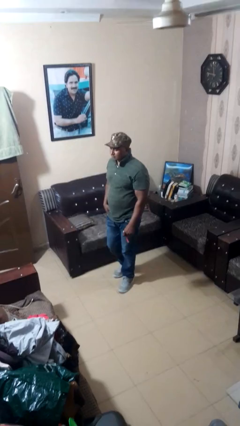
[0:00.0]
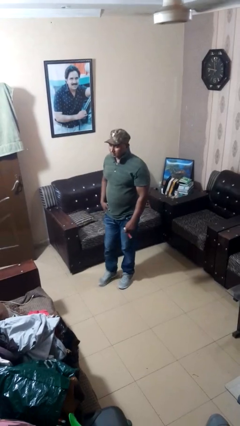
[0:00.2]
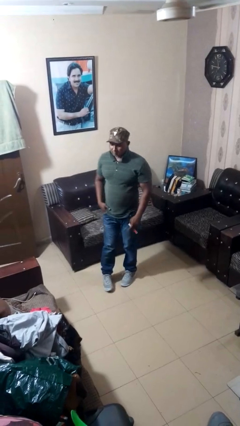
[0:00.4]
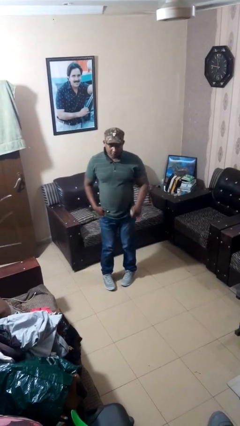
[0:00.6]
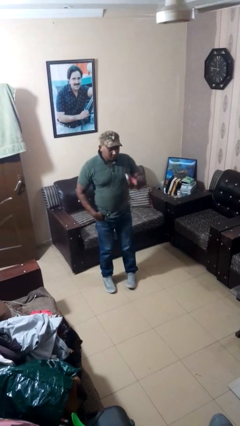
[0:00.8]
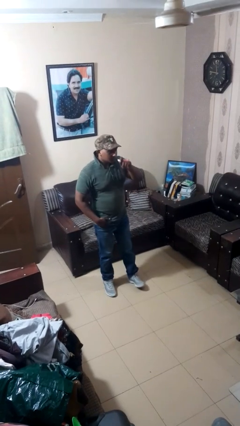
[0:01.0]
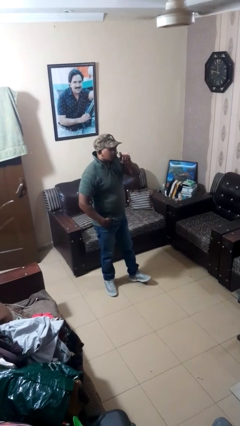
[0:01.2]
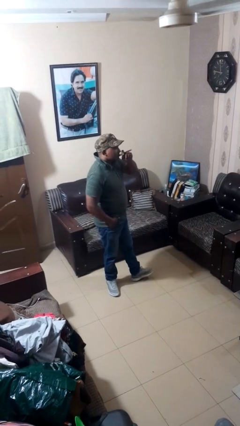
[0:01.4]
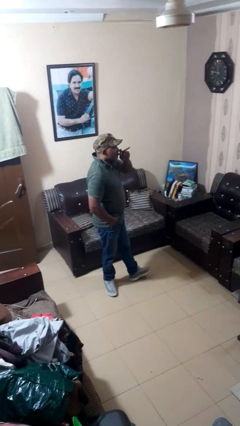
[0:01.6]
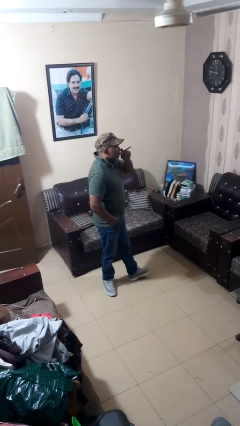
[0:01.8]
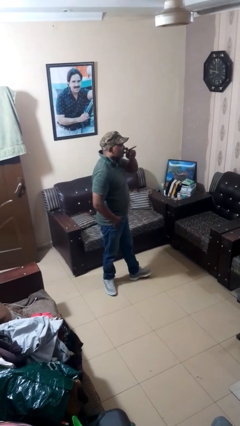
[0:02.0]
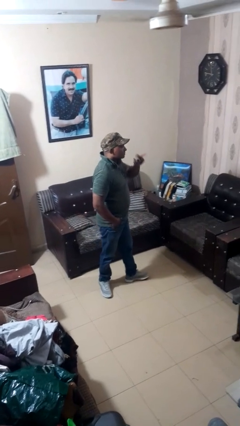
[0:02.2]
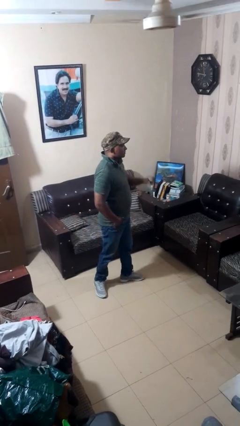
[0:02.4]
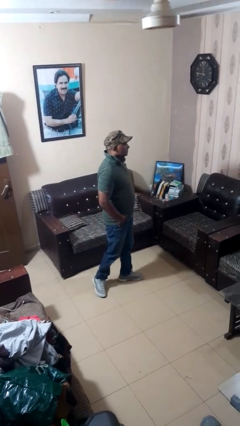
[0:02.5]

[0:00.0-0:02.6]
person vapes

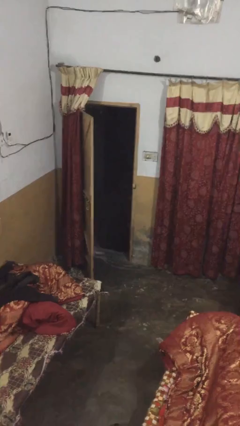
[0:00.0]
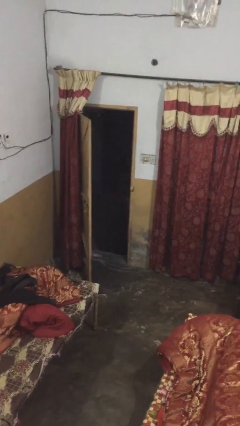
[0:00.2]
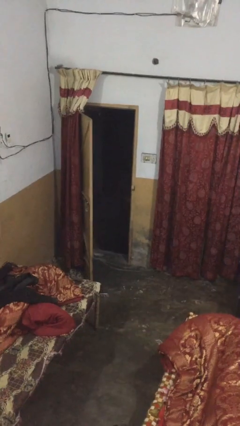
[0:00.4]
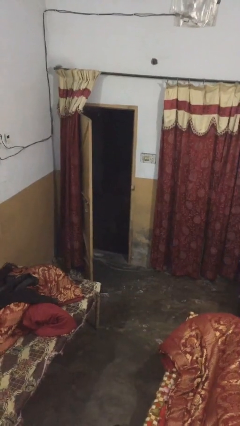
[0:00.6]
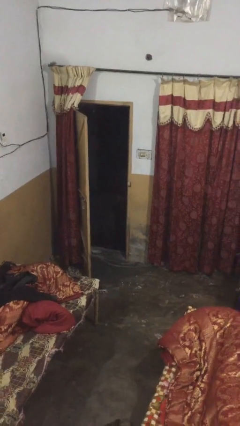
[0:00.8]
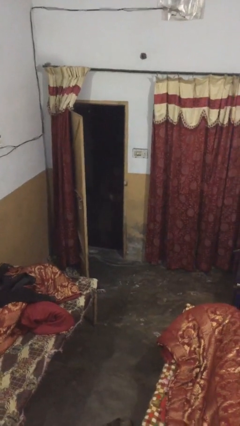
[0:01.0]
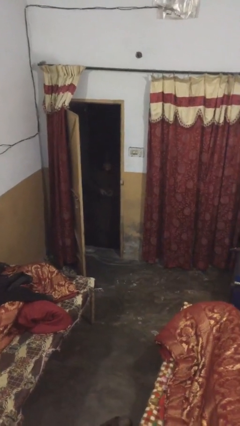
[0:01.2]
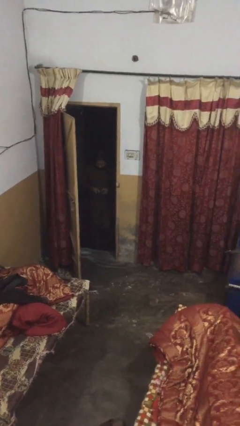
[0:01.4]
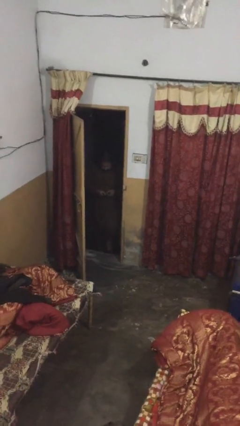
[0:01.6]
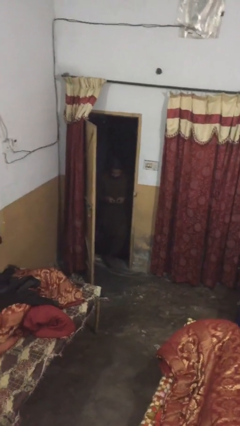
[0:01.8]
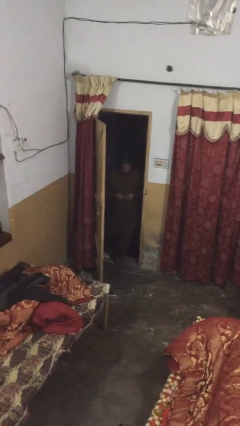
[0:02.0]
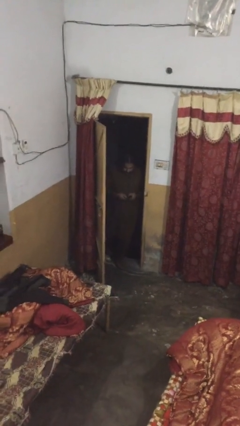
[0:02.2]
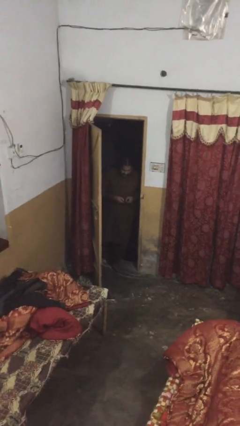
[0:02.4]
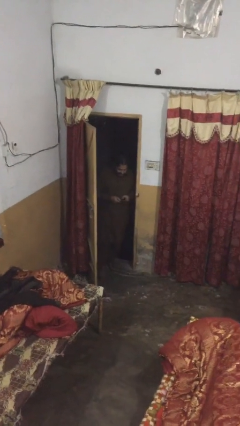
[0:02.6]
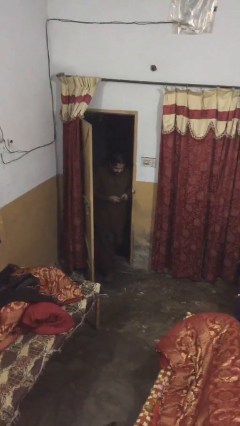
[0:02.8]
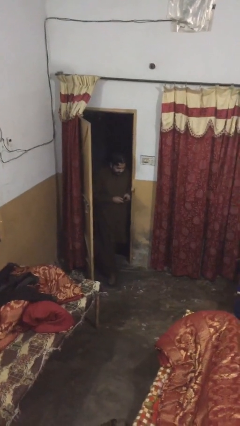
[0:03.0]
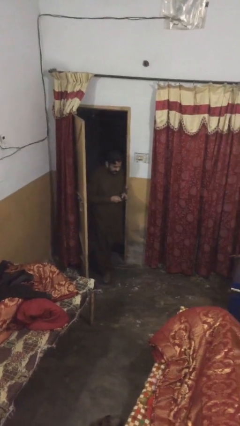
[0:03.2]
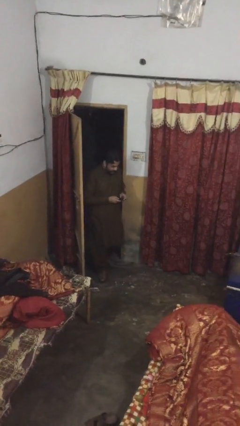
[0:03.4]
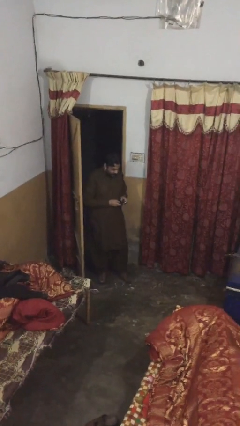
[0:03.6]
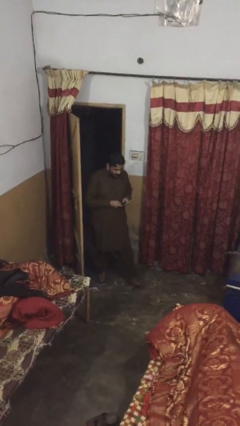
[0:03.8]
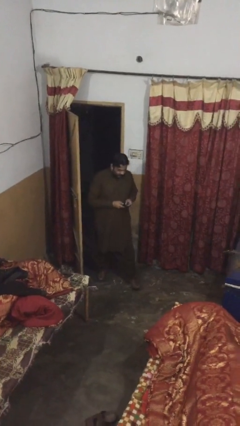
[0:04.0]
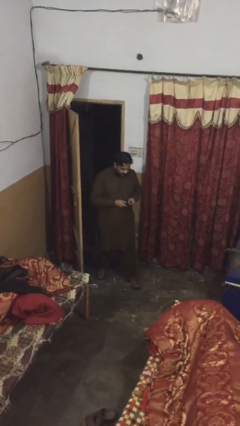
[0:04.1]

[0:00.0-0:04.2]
person enters scene through structure

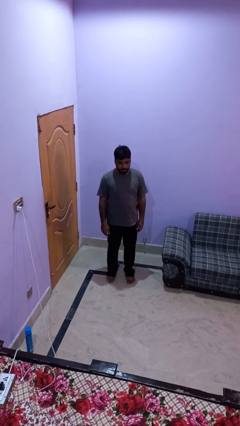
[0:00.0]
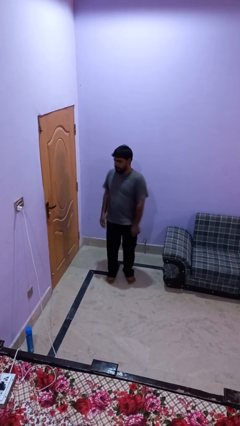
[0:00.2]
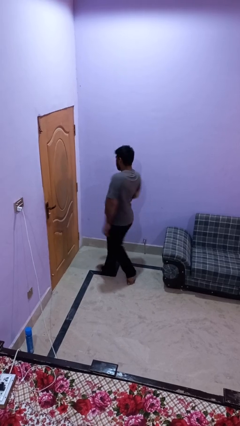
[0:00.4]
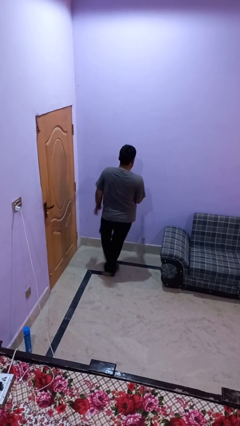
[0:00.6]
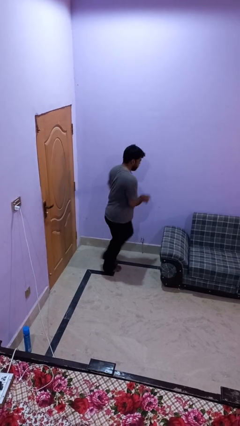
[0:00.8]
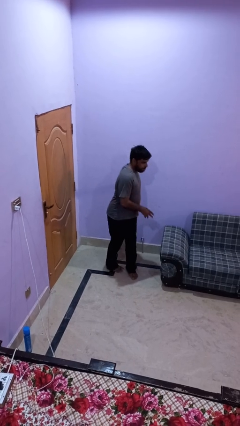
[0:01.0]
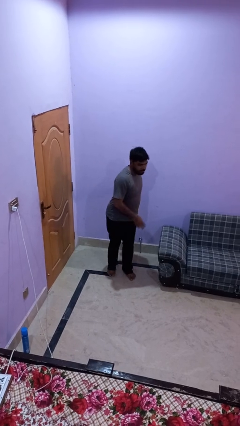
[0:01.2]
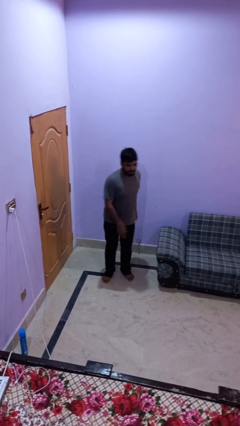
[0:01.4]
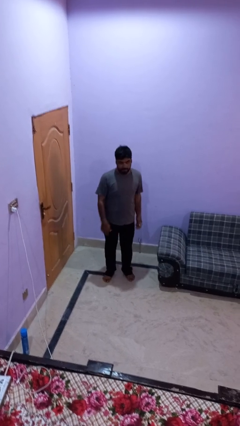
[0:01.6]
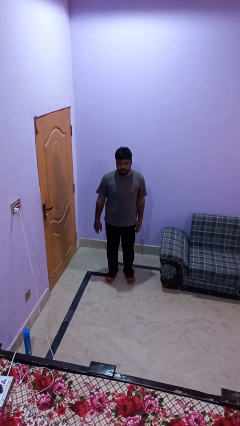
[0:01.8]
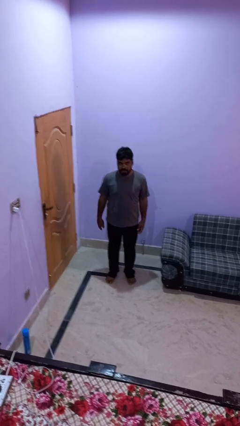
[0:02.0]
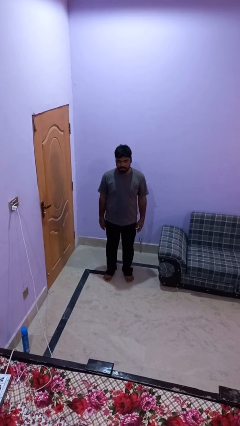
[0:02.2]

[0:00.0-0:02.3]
person twirls

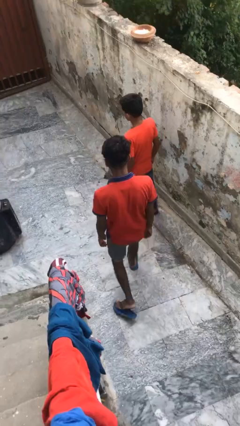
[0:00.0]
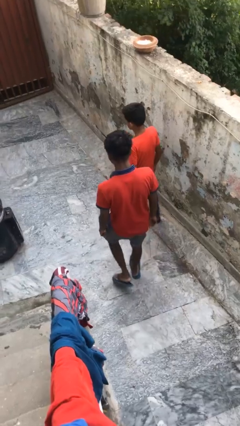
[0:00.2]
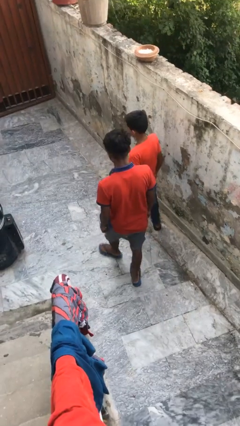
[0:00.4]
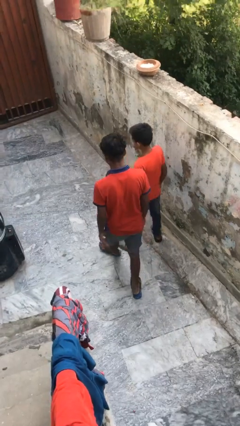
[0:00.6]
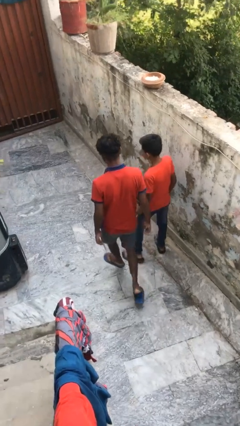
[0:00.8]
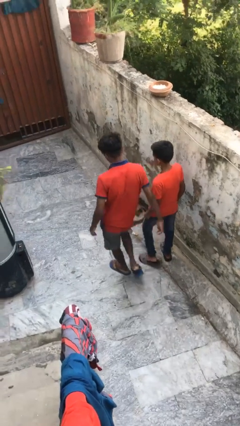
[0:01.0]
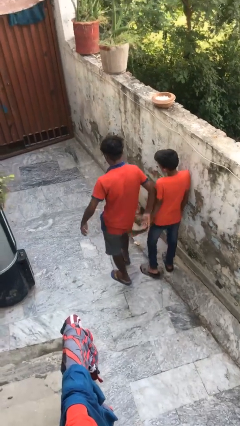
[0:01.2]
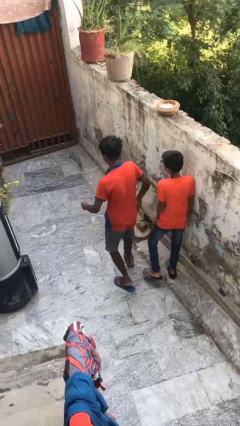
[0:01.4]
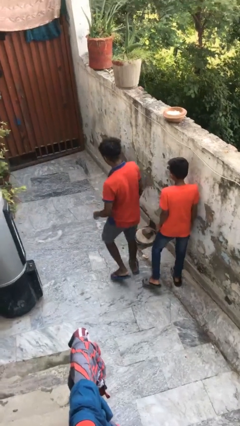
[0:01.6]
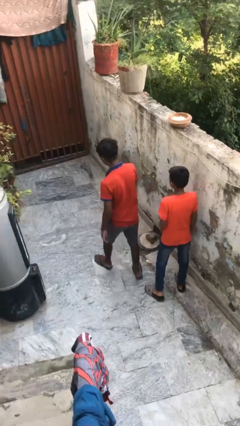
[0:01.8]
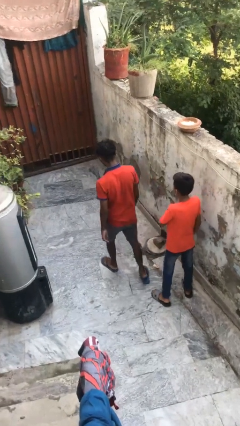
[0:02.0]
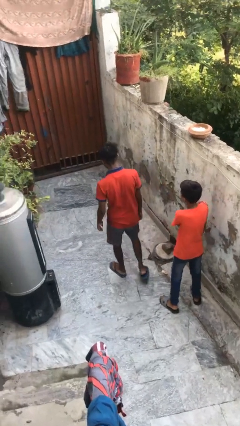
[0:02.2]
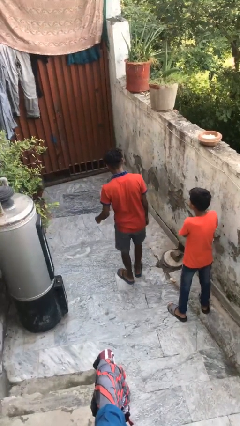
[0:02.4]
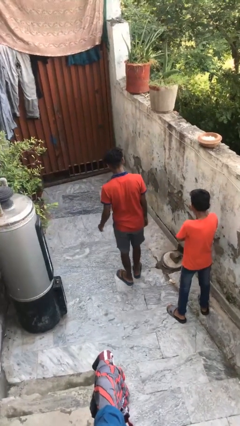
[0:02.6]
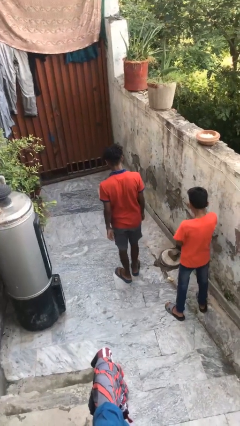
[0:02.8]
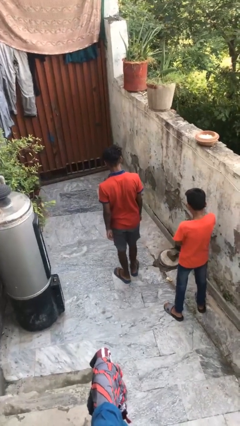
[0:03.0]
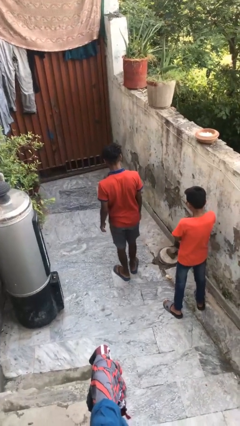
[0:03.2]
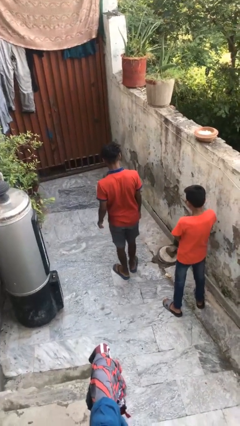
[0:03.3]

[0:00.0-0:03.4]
person bumps into person

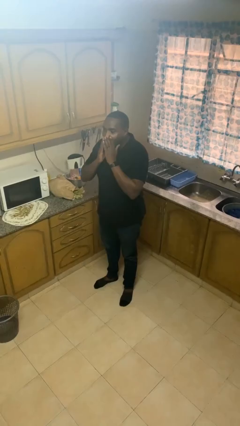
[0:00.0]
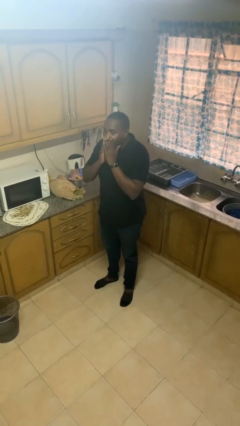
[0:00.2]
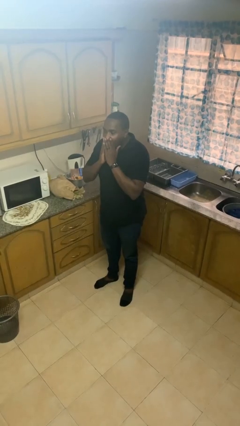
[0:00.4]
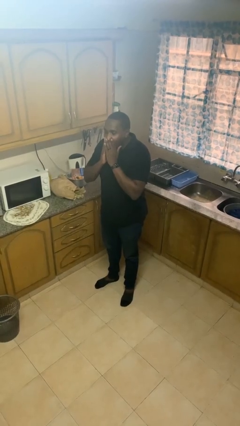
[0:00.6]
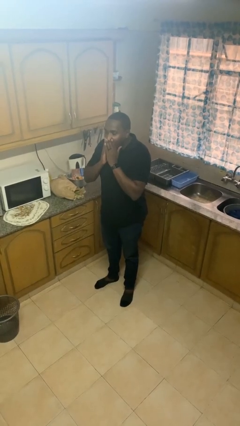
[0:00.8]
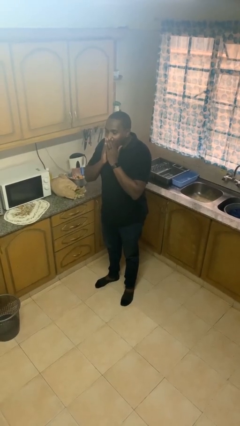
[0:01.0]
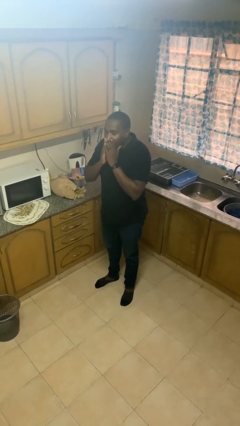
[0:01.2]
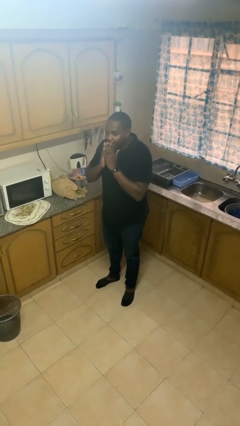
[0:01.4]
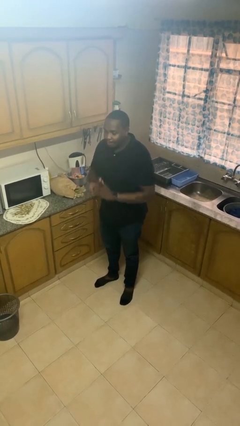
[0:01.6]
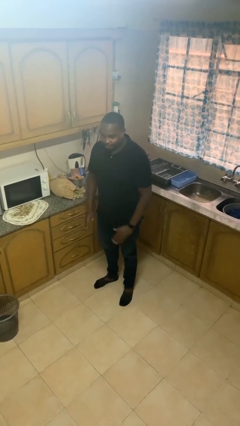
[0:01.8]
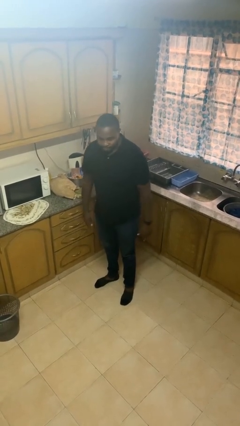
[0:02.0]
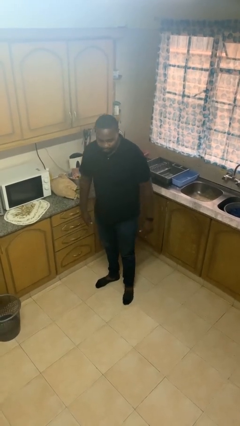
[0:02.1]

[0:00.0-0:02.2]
person yawns

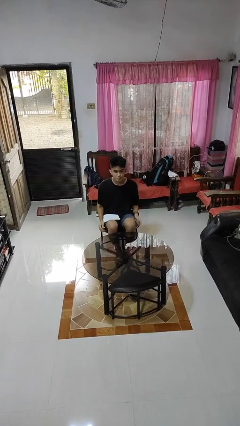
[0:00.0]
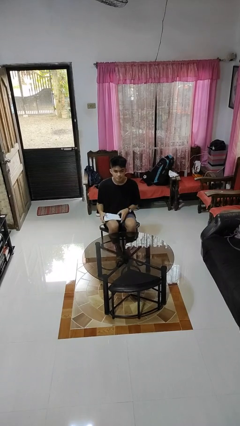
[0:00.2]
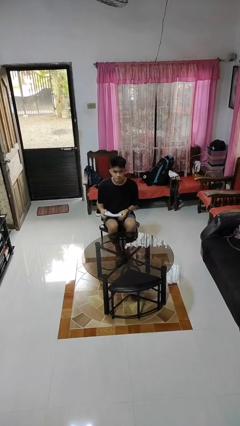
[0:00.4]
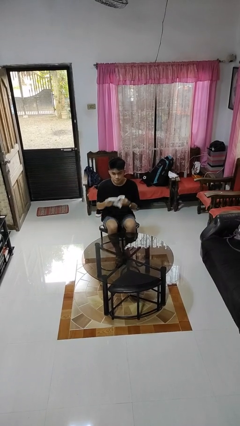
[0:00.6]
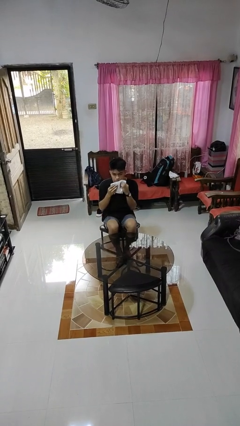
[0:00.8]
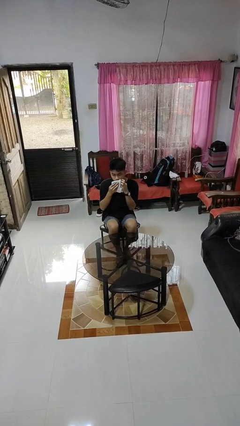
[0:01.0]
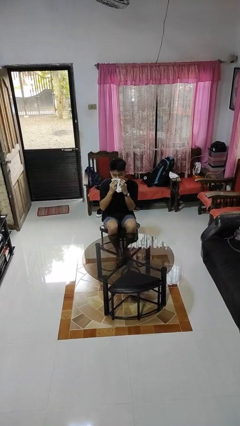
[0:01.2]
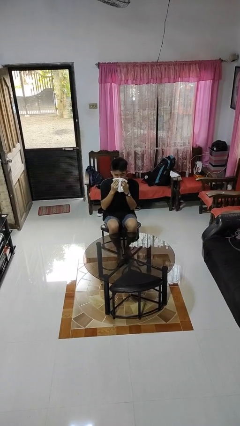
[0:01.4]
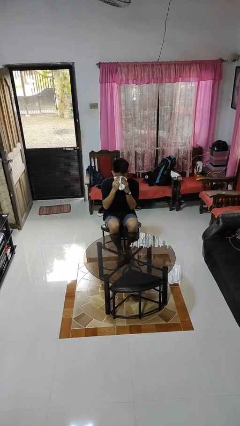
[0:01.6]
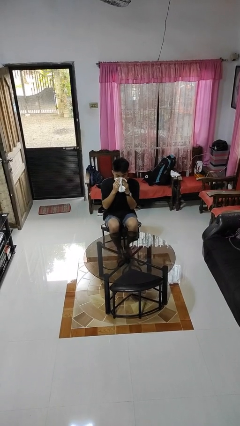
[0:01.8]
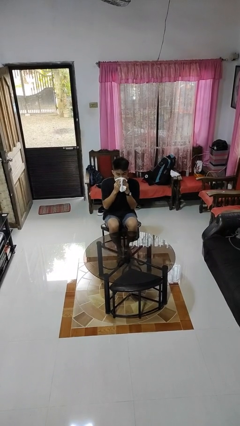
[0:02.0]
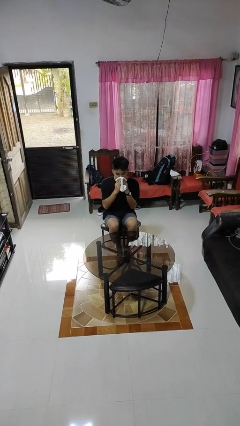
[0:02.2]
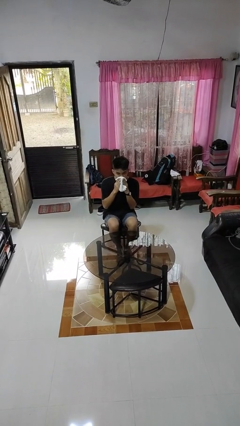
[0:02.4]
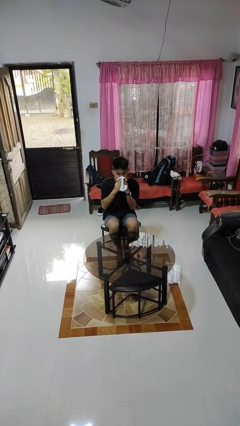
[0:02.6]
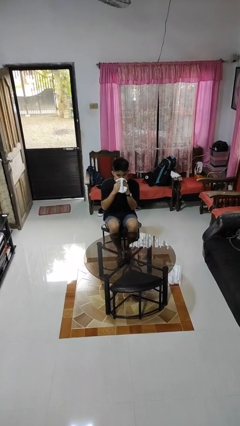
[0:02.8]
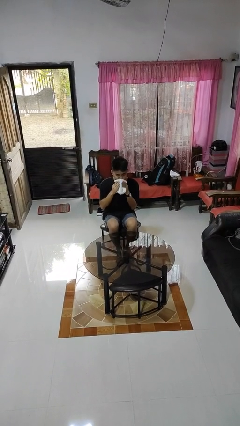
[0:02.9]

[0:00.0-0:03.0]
person wipes mouth with napkin

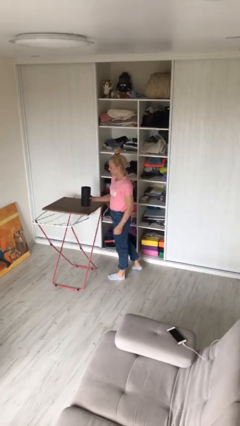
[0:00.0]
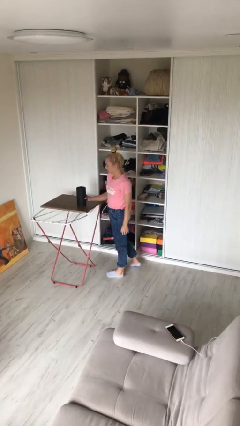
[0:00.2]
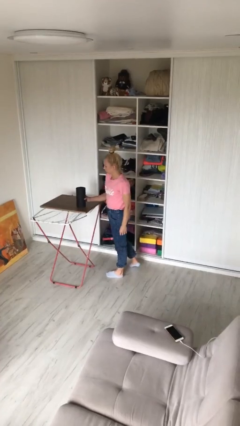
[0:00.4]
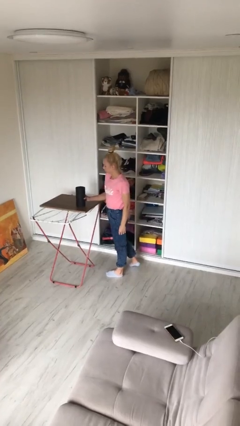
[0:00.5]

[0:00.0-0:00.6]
person puts down object on table
